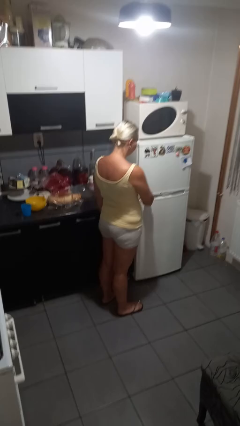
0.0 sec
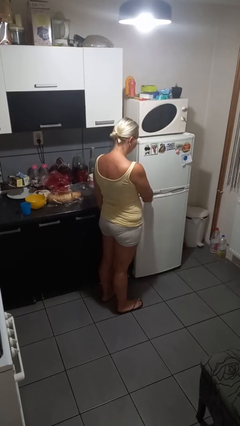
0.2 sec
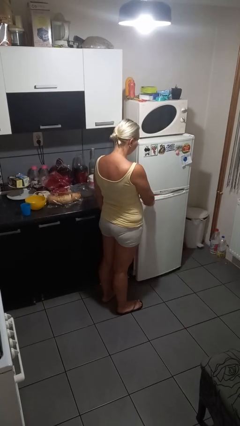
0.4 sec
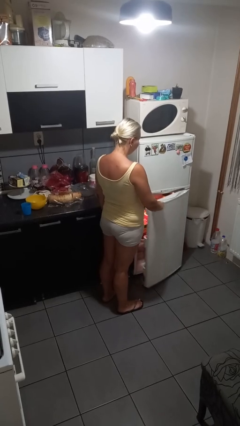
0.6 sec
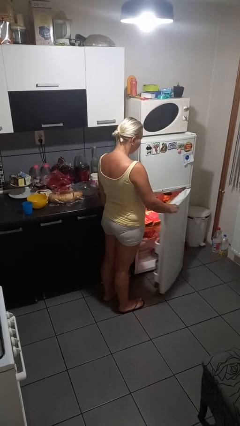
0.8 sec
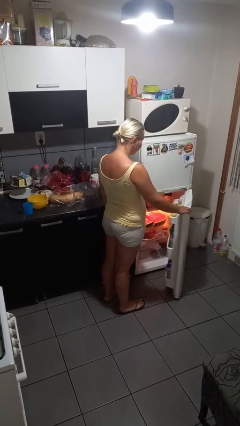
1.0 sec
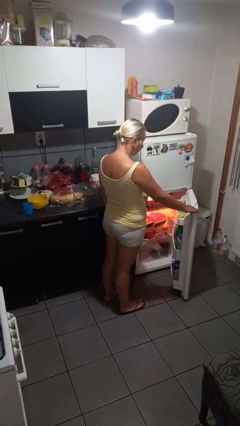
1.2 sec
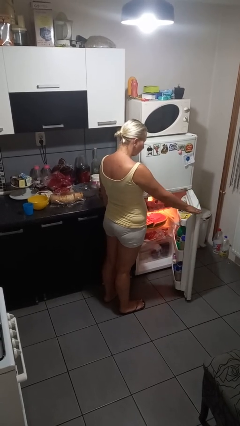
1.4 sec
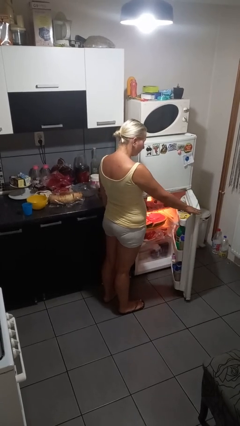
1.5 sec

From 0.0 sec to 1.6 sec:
person opens refrigerator

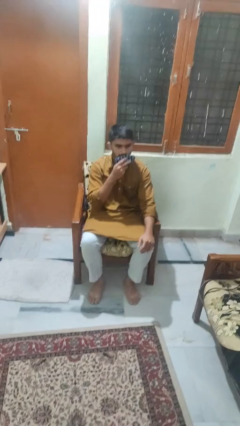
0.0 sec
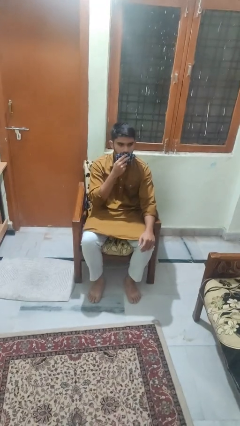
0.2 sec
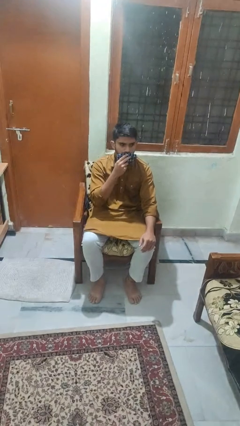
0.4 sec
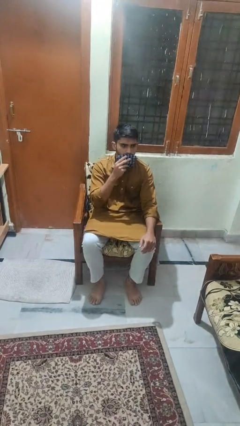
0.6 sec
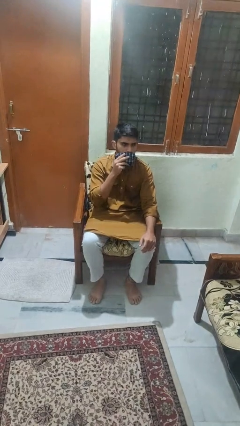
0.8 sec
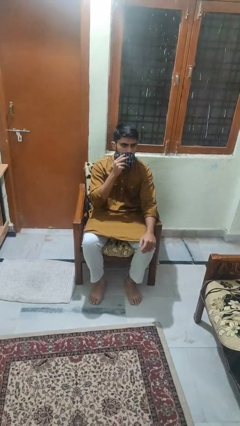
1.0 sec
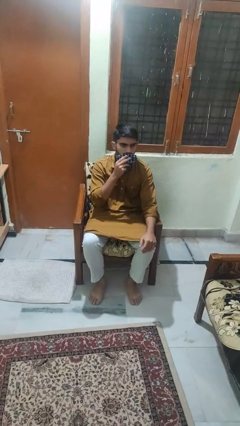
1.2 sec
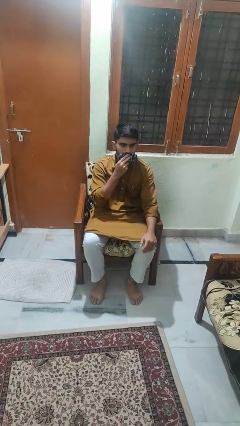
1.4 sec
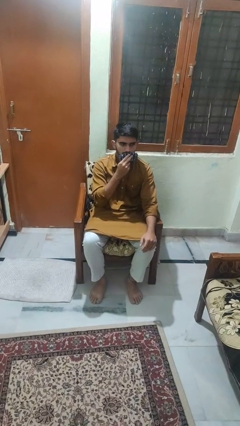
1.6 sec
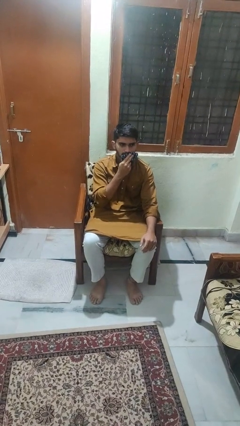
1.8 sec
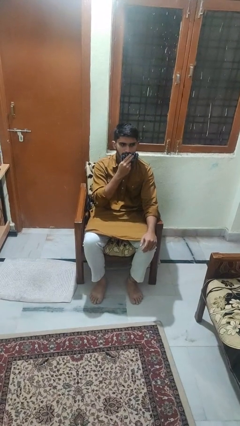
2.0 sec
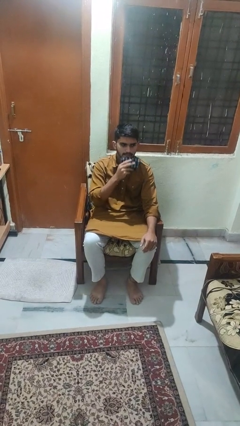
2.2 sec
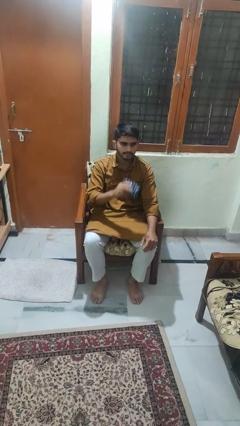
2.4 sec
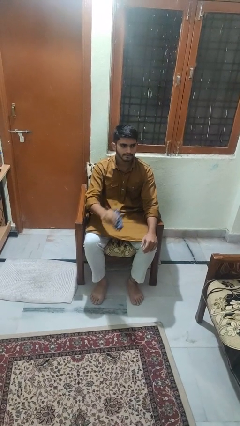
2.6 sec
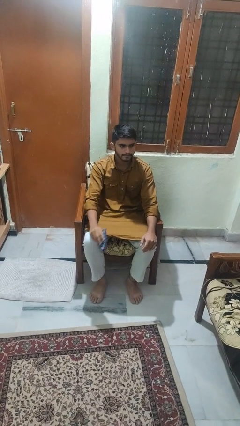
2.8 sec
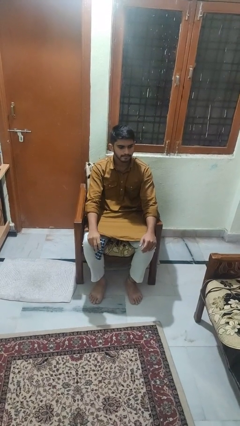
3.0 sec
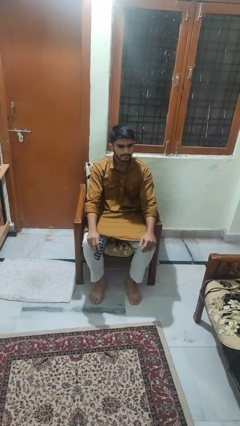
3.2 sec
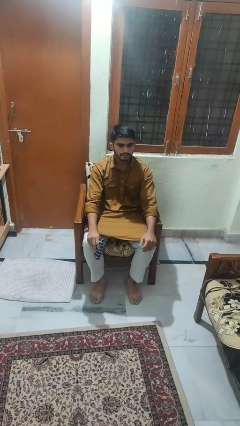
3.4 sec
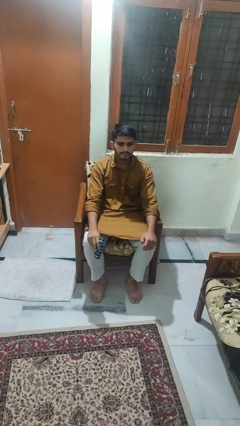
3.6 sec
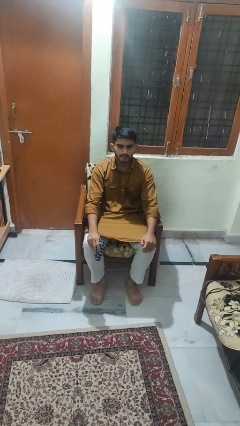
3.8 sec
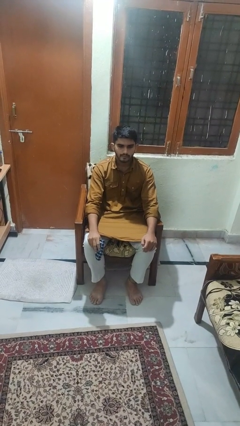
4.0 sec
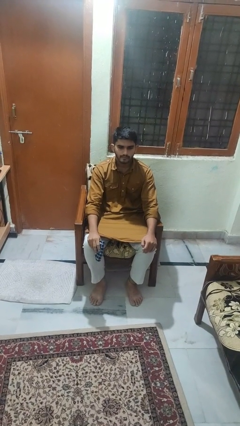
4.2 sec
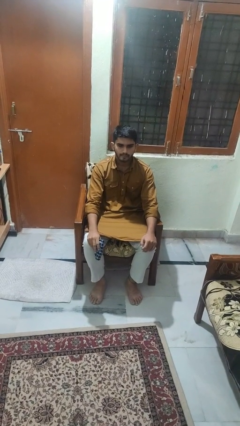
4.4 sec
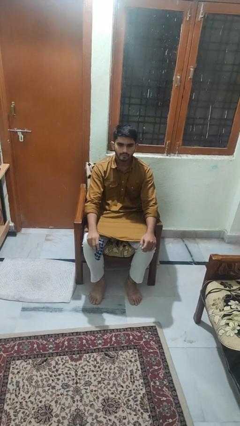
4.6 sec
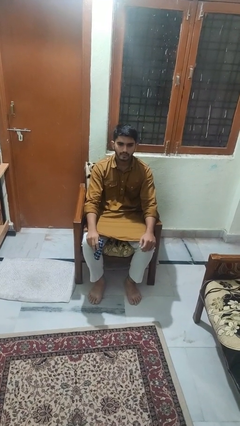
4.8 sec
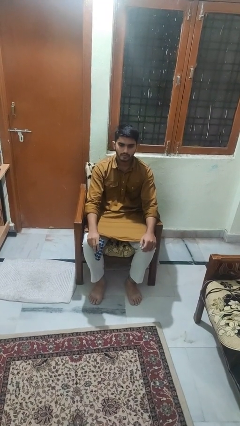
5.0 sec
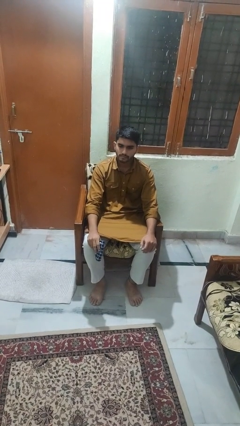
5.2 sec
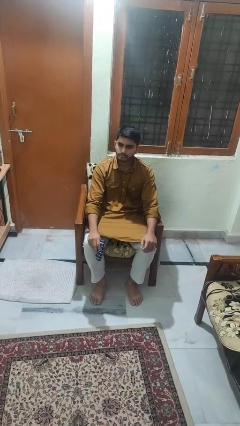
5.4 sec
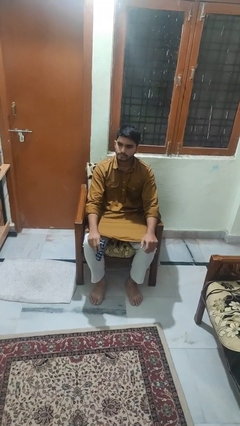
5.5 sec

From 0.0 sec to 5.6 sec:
person wipes mouth with napkin

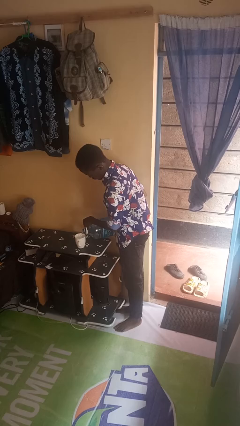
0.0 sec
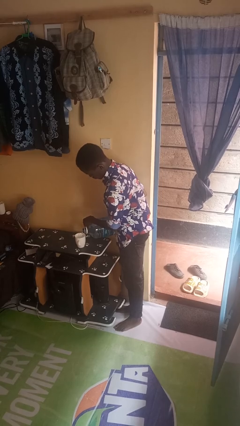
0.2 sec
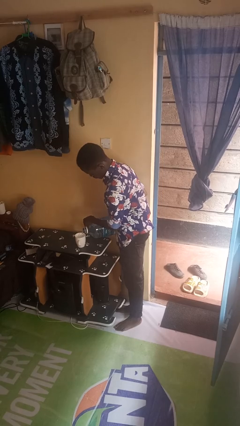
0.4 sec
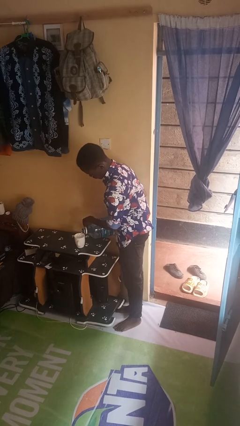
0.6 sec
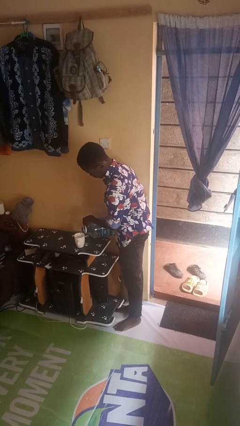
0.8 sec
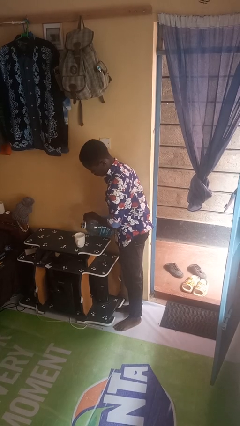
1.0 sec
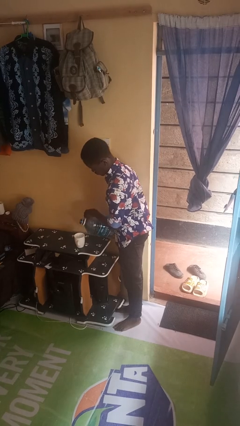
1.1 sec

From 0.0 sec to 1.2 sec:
person pours liquid into cup

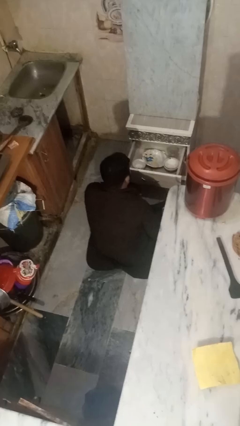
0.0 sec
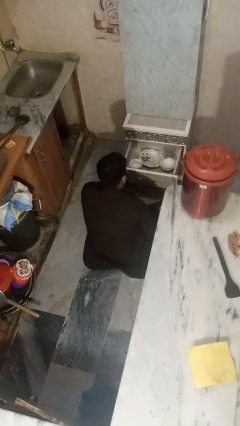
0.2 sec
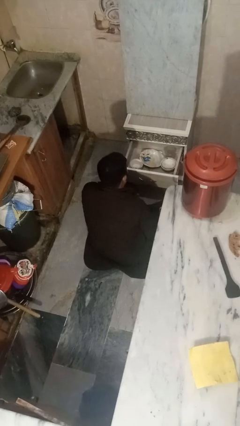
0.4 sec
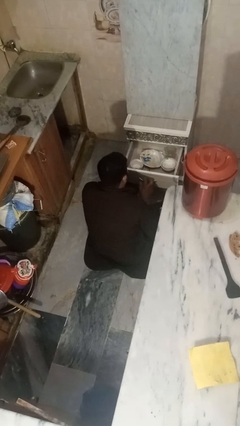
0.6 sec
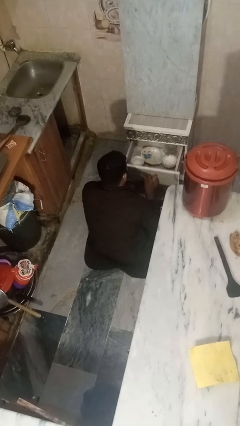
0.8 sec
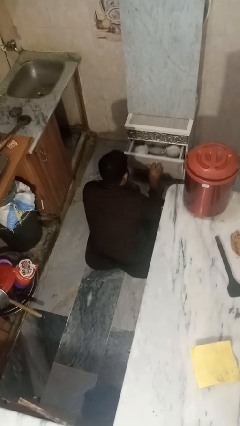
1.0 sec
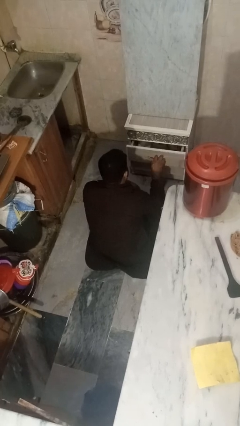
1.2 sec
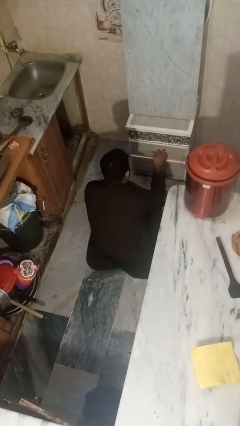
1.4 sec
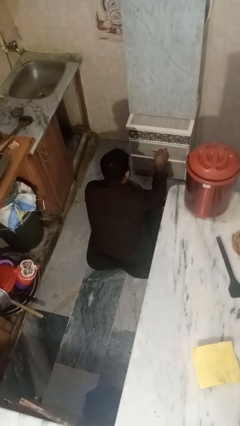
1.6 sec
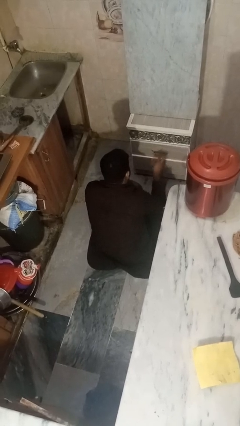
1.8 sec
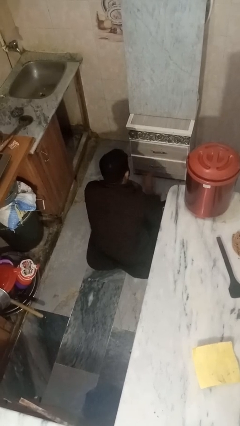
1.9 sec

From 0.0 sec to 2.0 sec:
person closes kitchen drawer

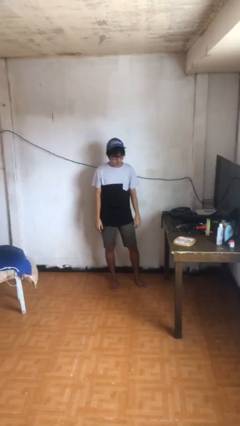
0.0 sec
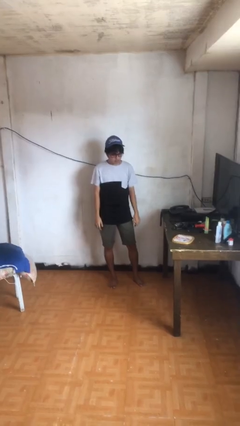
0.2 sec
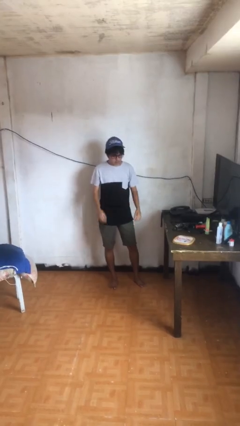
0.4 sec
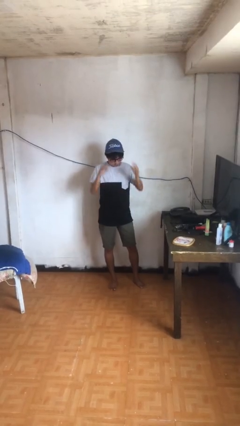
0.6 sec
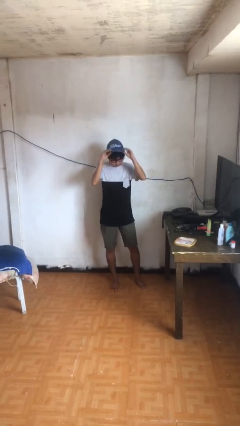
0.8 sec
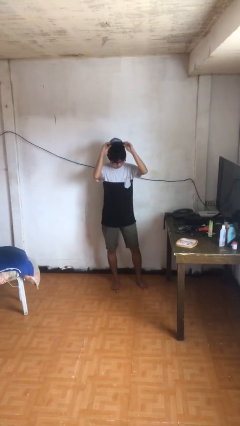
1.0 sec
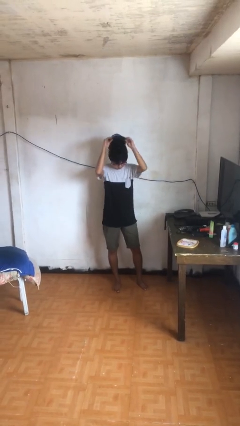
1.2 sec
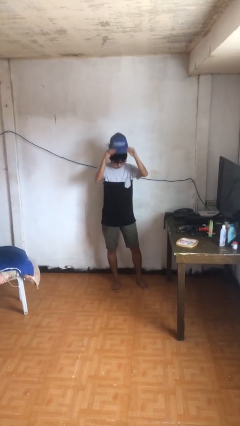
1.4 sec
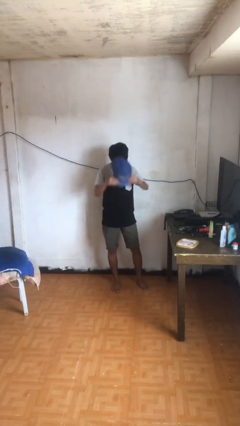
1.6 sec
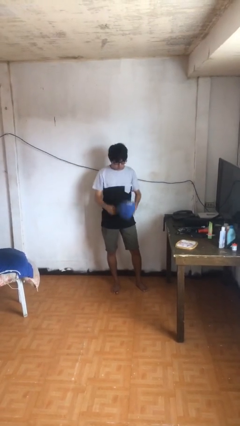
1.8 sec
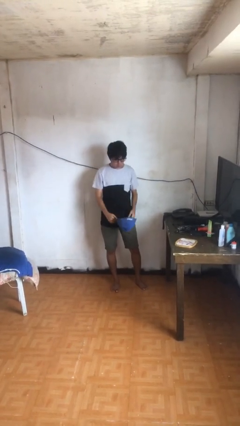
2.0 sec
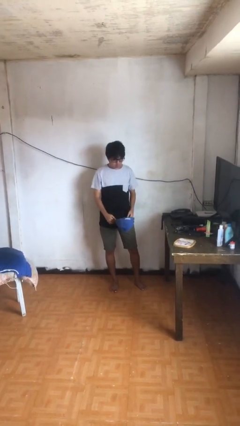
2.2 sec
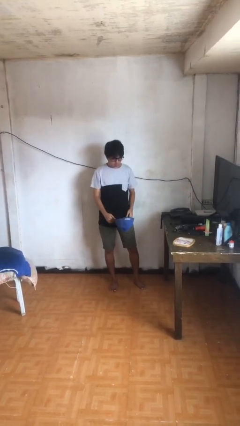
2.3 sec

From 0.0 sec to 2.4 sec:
person takes off hat

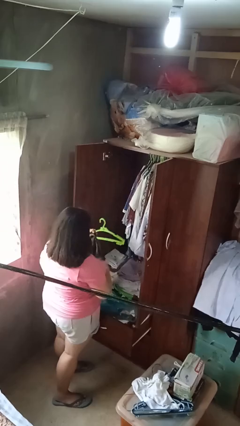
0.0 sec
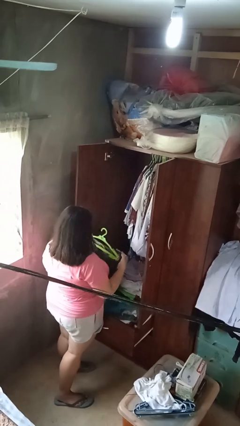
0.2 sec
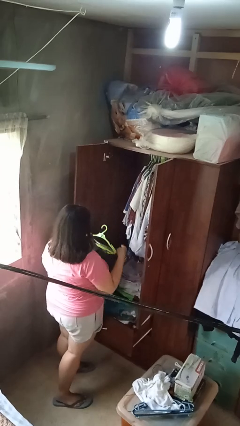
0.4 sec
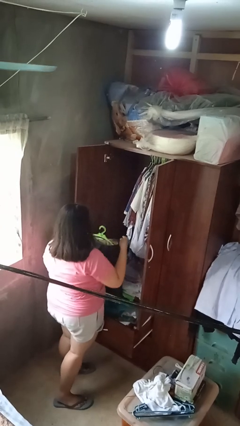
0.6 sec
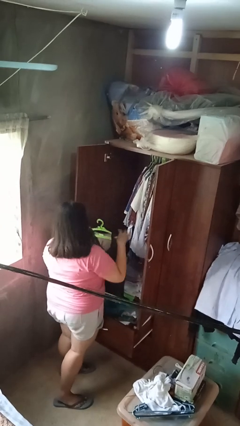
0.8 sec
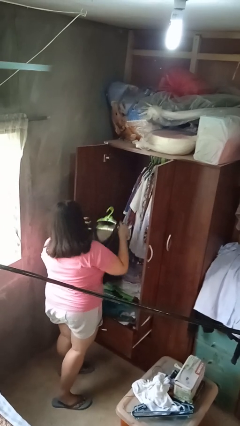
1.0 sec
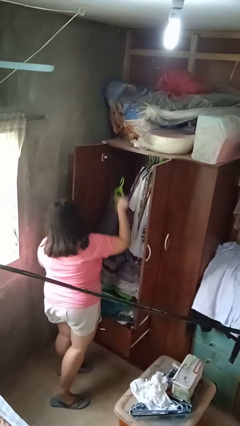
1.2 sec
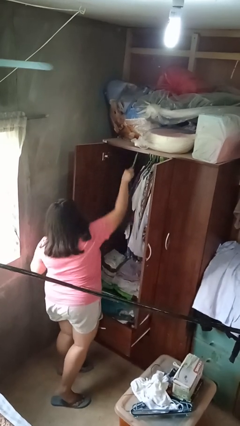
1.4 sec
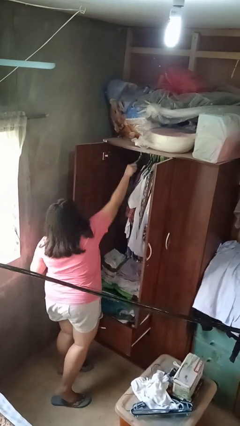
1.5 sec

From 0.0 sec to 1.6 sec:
person puts clothes into closet

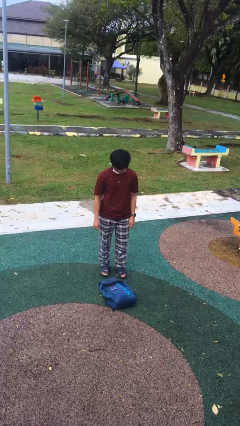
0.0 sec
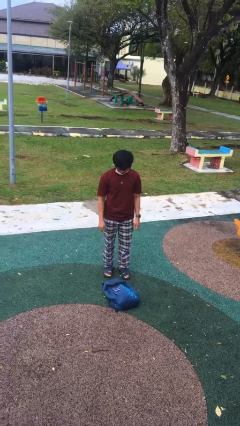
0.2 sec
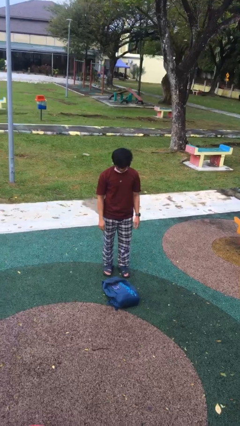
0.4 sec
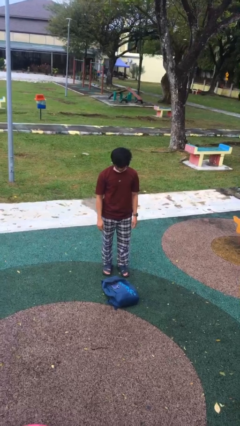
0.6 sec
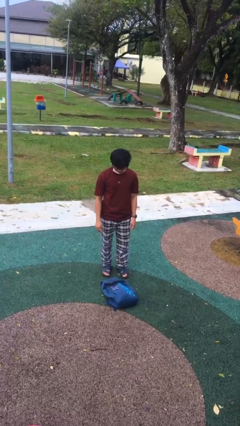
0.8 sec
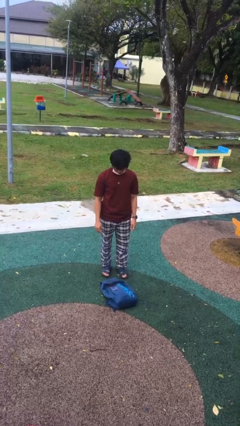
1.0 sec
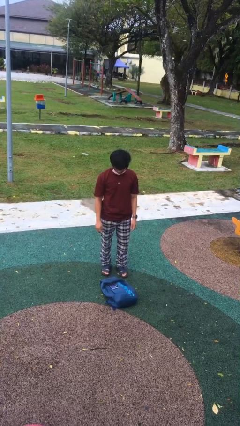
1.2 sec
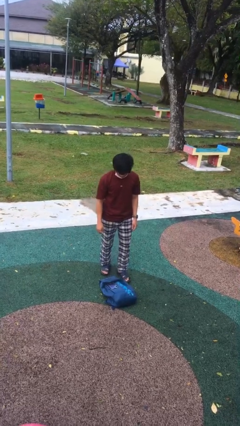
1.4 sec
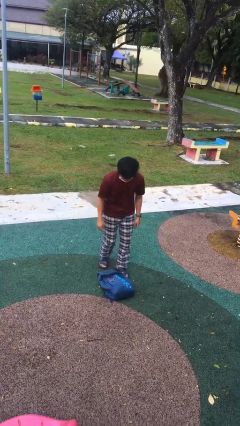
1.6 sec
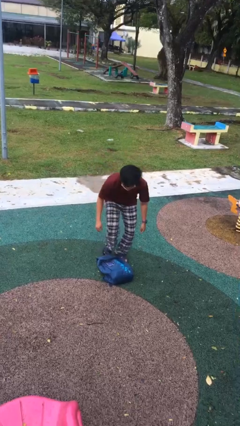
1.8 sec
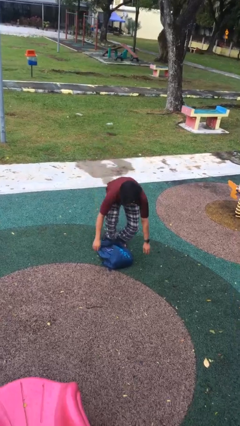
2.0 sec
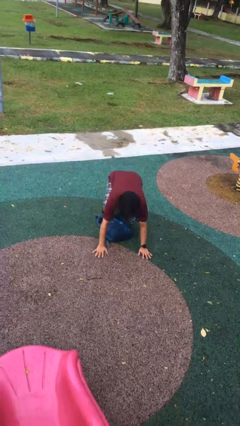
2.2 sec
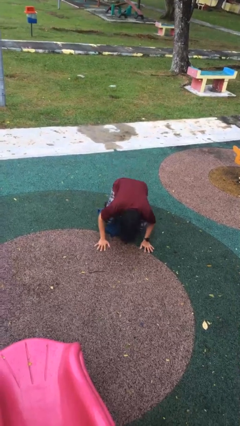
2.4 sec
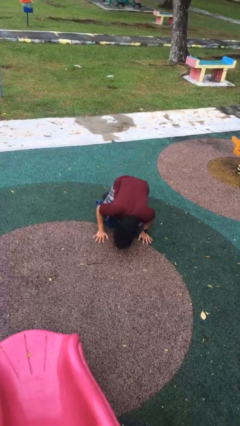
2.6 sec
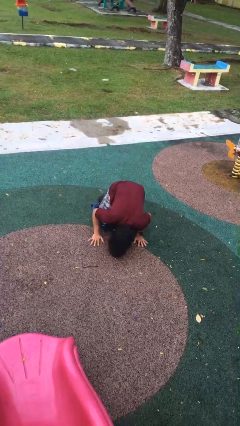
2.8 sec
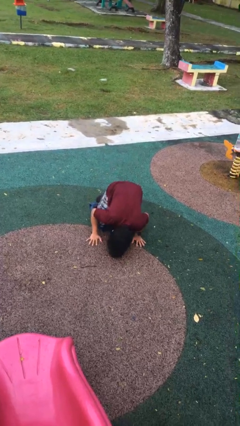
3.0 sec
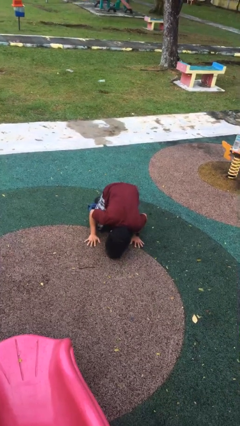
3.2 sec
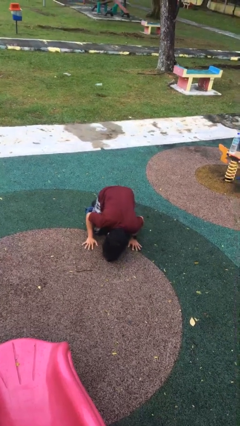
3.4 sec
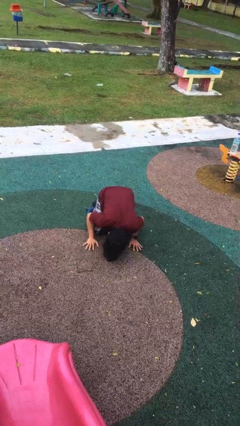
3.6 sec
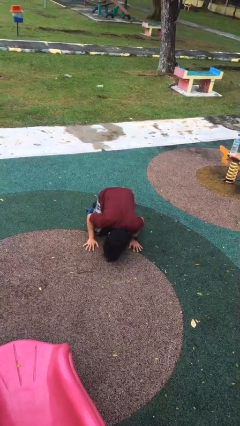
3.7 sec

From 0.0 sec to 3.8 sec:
person trips on object on floor
